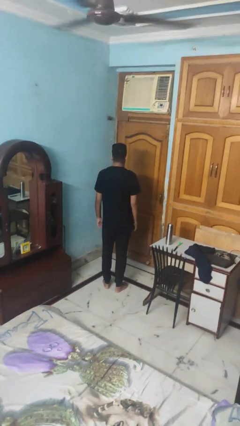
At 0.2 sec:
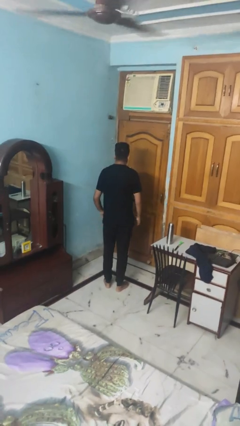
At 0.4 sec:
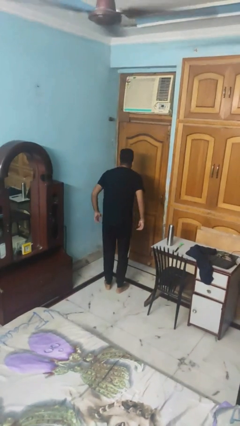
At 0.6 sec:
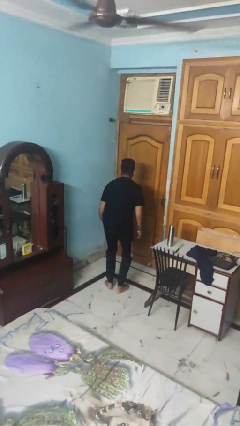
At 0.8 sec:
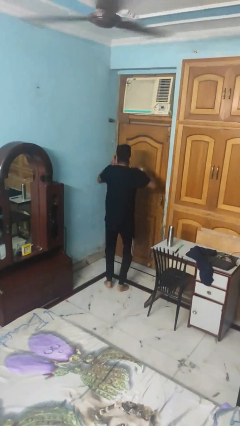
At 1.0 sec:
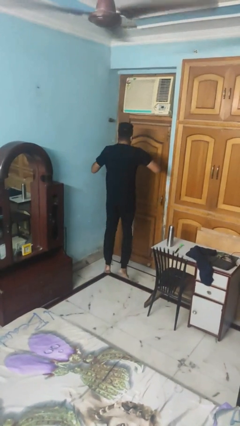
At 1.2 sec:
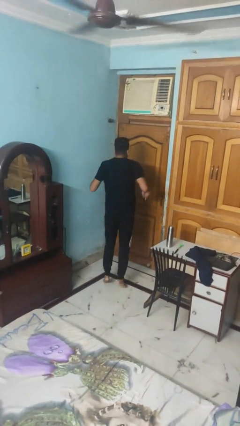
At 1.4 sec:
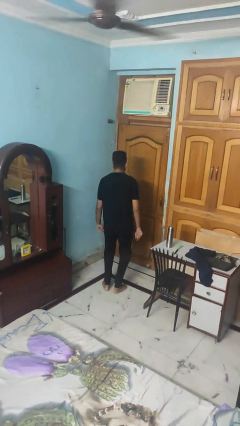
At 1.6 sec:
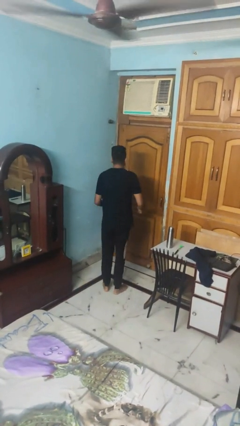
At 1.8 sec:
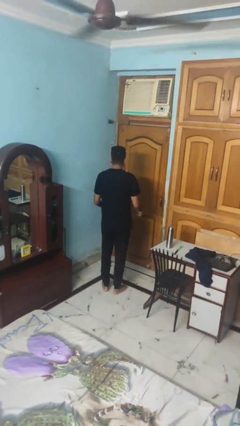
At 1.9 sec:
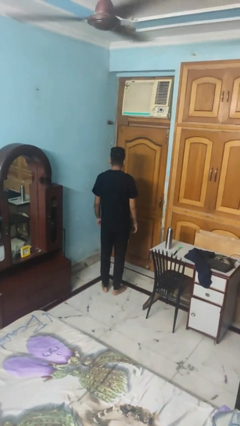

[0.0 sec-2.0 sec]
person jumps

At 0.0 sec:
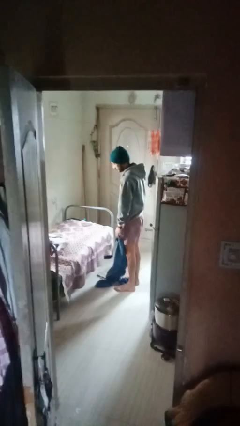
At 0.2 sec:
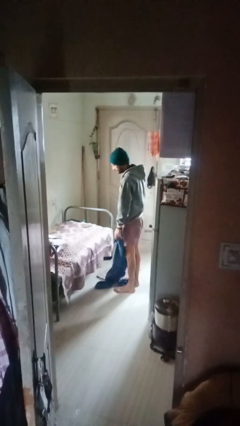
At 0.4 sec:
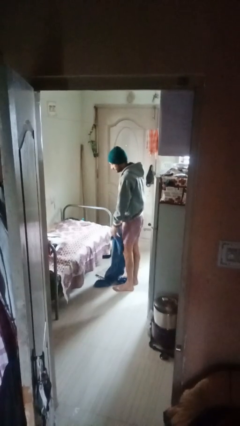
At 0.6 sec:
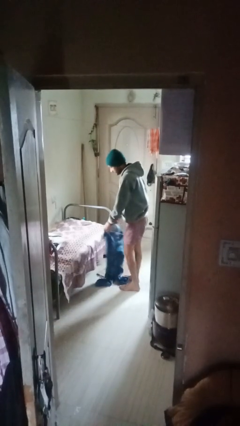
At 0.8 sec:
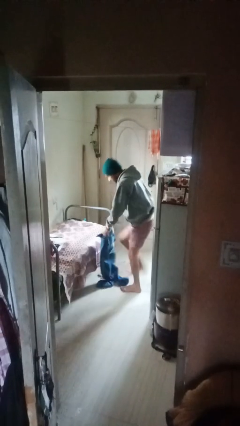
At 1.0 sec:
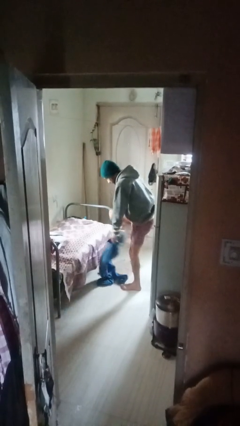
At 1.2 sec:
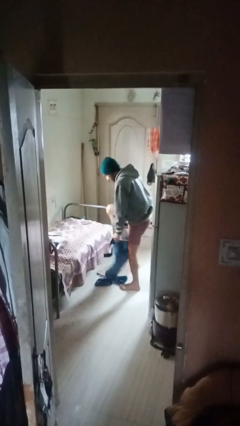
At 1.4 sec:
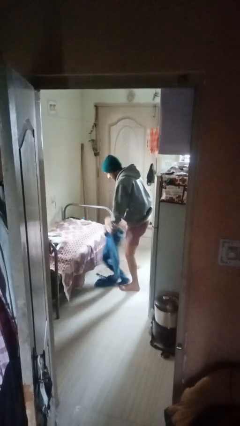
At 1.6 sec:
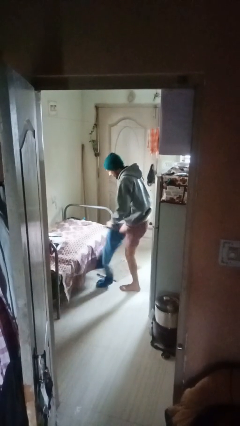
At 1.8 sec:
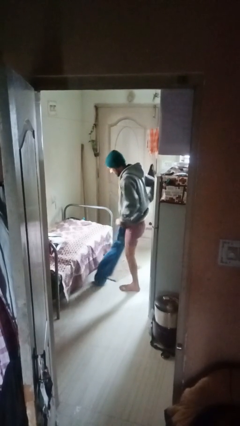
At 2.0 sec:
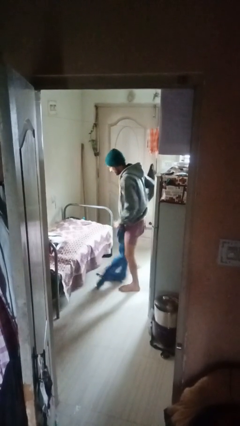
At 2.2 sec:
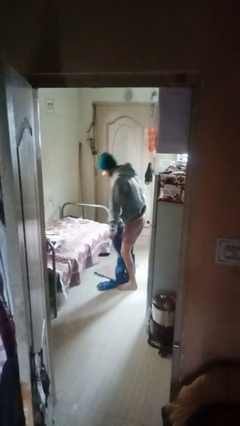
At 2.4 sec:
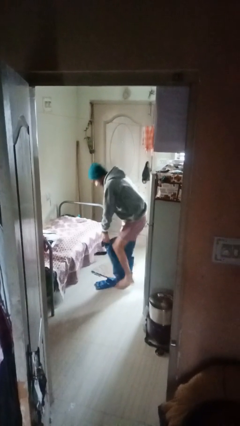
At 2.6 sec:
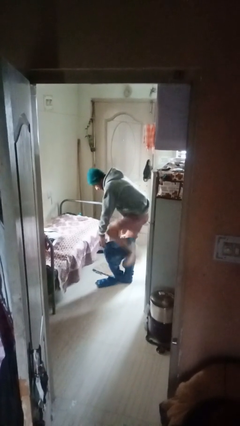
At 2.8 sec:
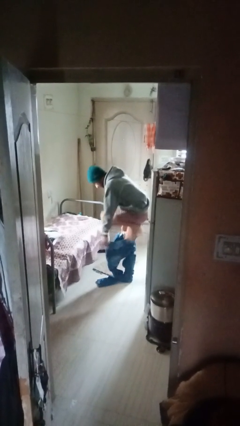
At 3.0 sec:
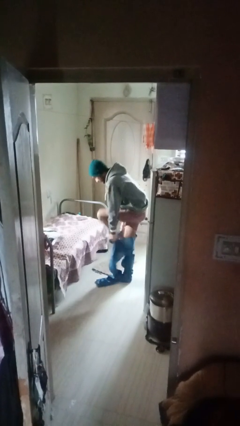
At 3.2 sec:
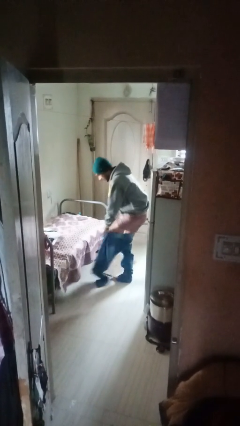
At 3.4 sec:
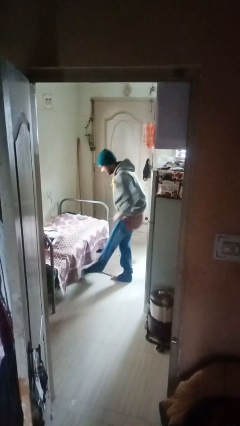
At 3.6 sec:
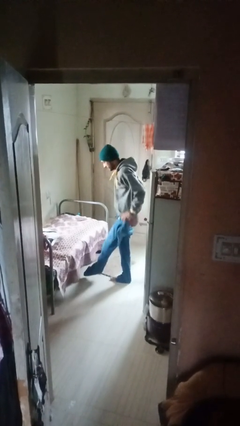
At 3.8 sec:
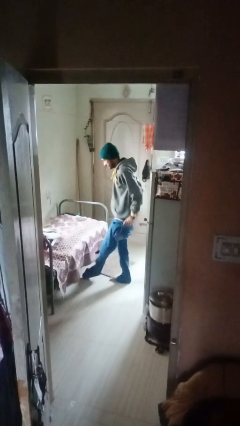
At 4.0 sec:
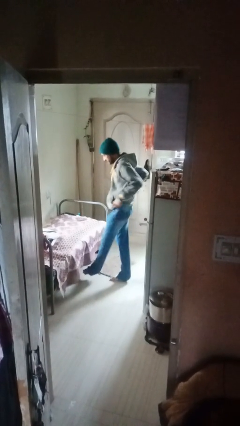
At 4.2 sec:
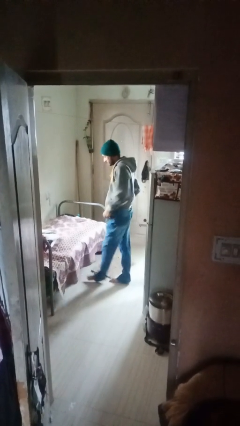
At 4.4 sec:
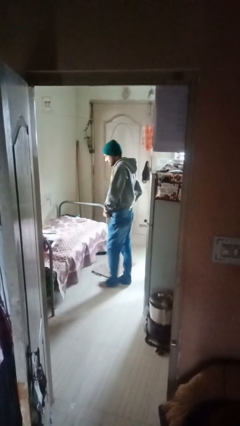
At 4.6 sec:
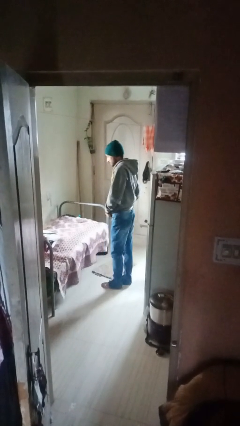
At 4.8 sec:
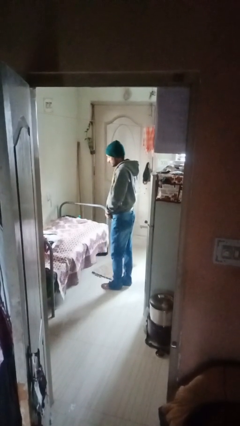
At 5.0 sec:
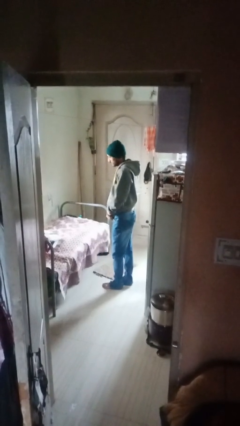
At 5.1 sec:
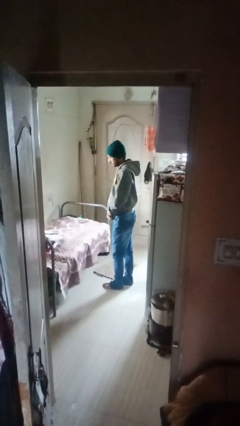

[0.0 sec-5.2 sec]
person puts on pants

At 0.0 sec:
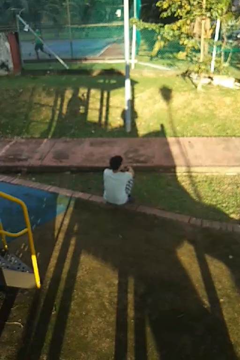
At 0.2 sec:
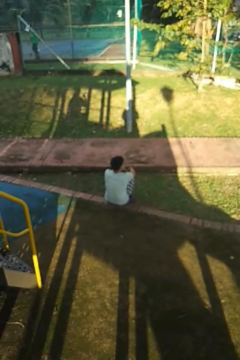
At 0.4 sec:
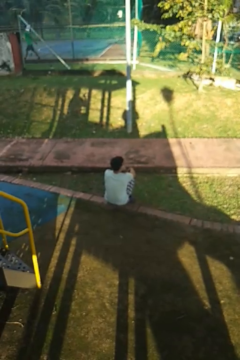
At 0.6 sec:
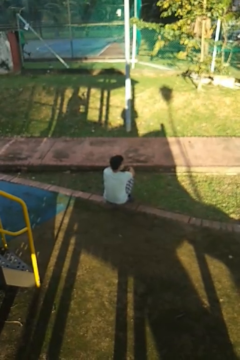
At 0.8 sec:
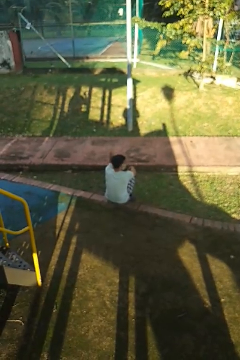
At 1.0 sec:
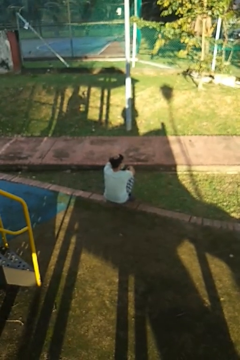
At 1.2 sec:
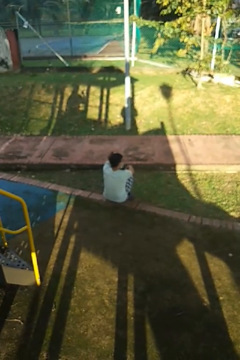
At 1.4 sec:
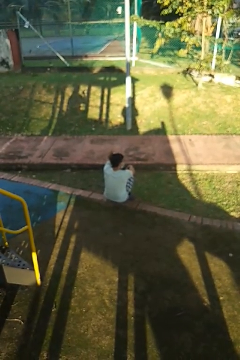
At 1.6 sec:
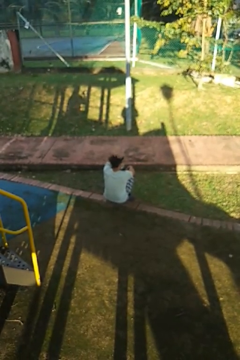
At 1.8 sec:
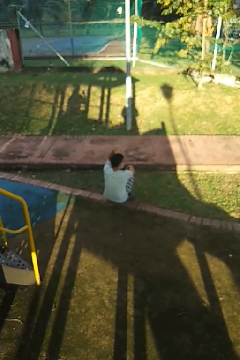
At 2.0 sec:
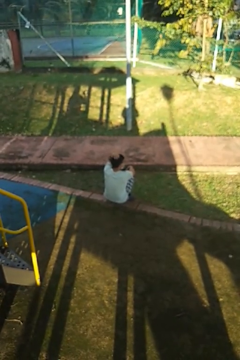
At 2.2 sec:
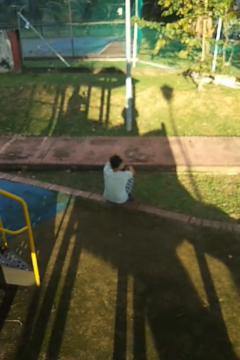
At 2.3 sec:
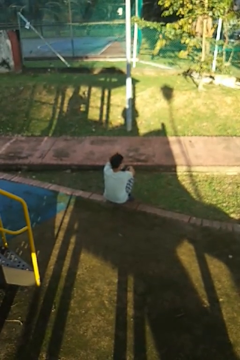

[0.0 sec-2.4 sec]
person pats head

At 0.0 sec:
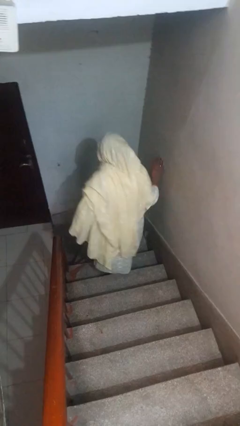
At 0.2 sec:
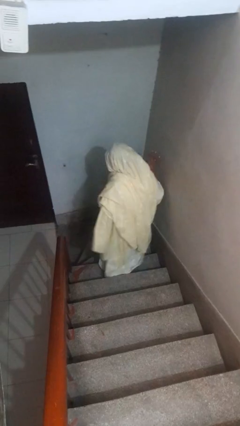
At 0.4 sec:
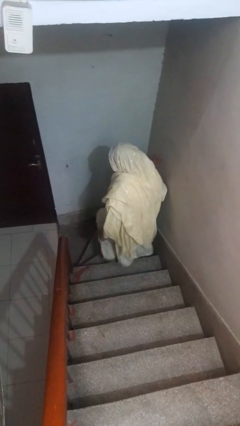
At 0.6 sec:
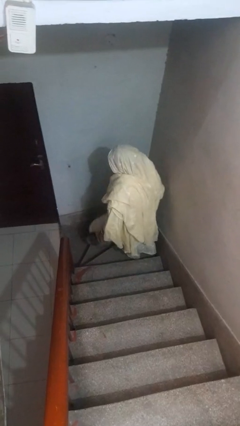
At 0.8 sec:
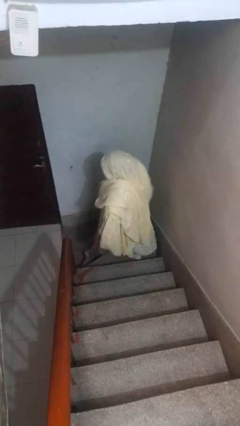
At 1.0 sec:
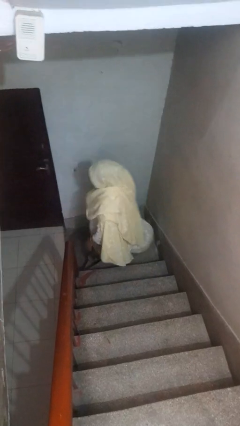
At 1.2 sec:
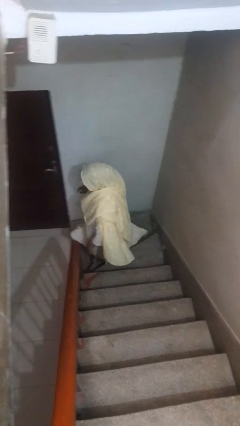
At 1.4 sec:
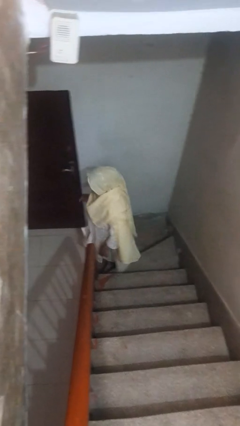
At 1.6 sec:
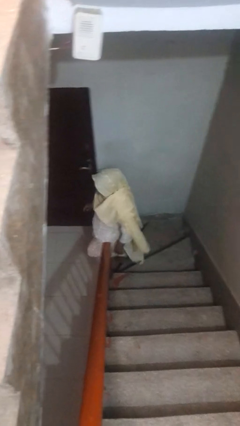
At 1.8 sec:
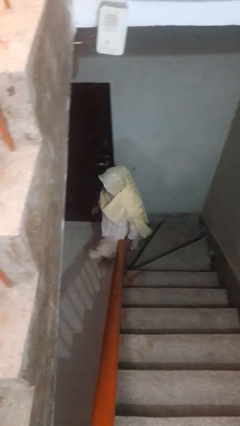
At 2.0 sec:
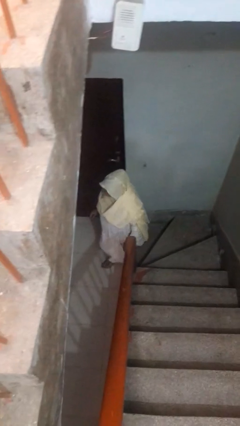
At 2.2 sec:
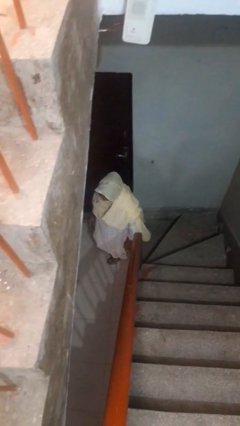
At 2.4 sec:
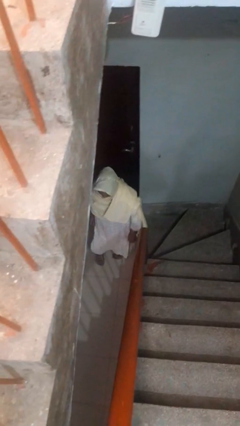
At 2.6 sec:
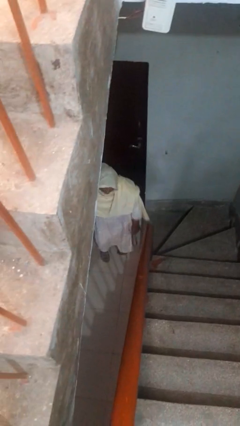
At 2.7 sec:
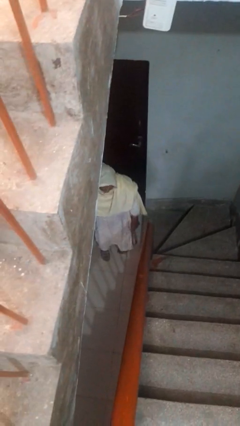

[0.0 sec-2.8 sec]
person climbs down stairs

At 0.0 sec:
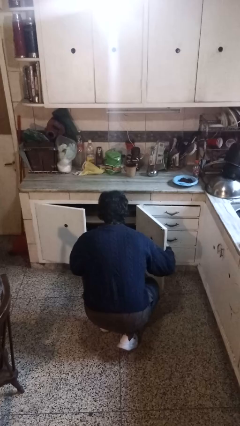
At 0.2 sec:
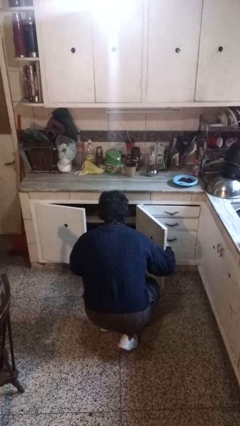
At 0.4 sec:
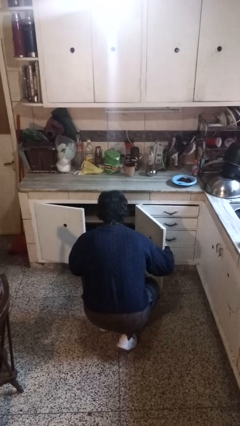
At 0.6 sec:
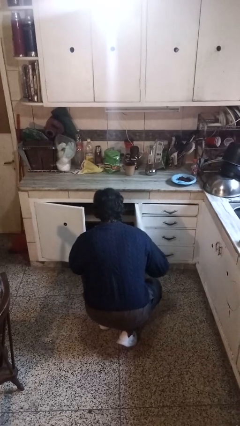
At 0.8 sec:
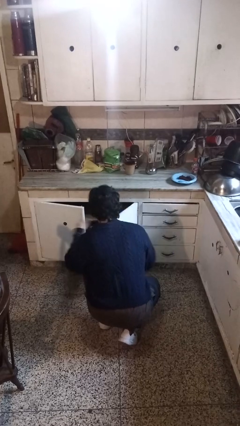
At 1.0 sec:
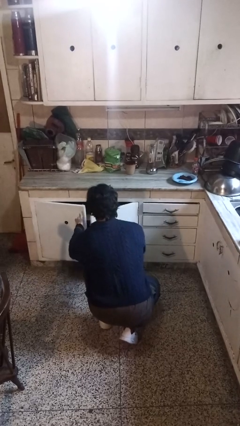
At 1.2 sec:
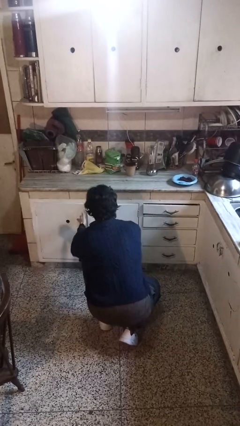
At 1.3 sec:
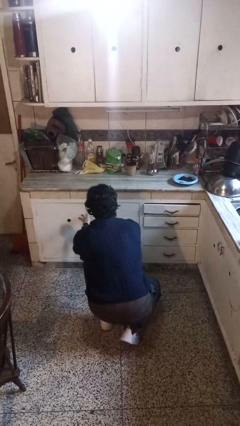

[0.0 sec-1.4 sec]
person closes cabinet

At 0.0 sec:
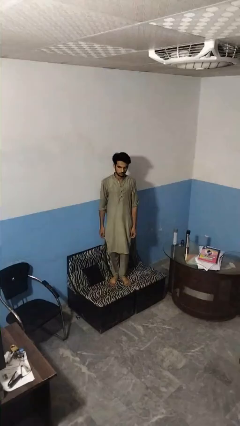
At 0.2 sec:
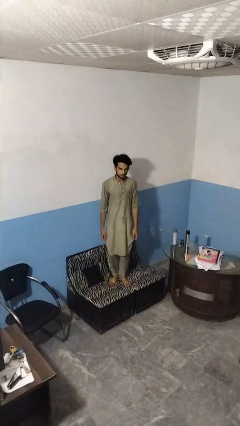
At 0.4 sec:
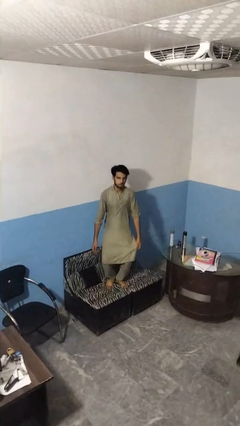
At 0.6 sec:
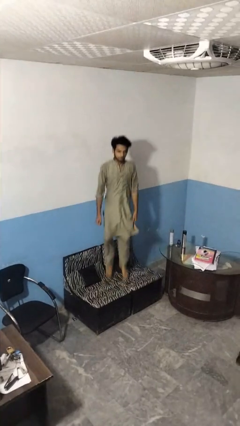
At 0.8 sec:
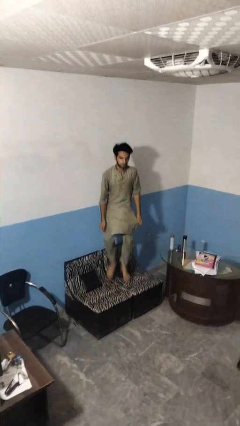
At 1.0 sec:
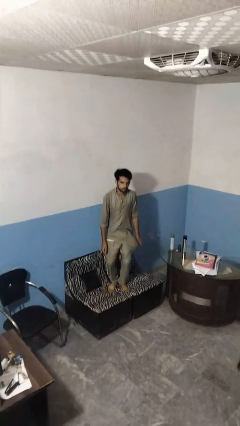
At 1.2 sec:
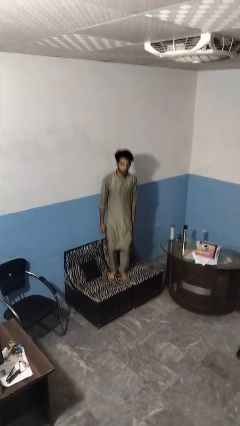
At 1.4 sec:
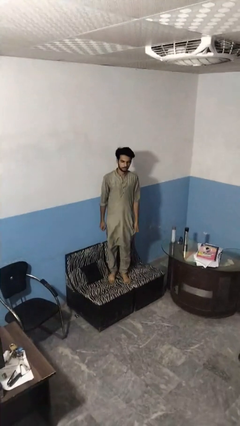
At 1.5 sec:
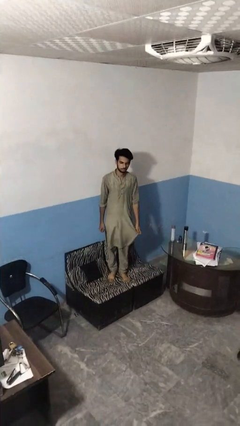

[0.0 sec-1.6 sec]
person jumps on couch

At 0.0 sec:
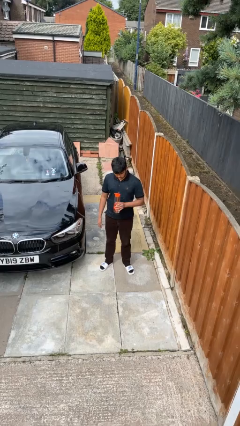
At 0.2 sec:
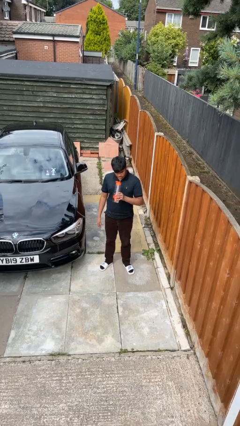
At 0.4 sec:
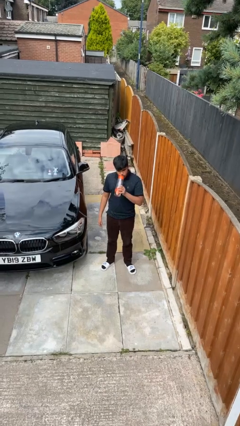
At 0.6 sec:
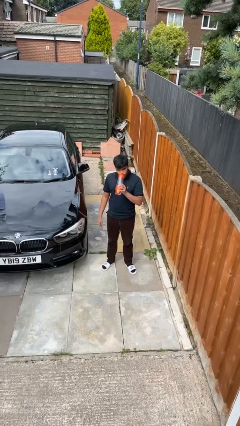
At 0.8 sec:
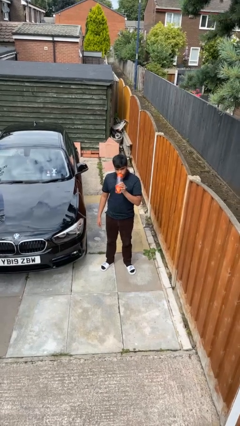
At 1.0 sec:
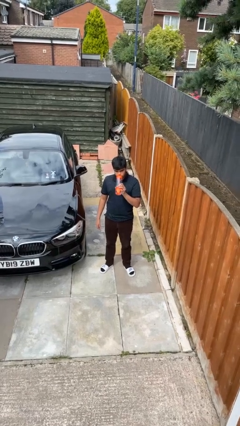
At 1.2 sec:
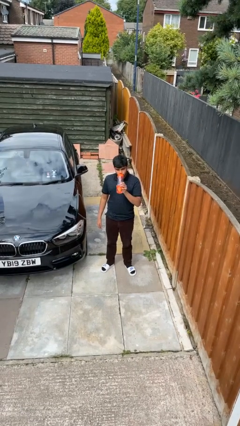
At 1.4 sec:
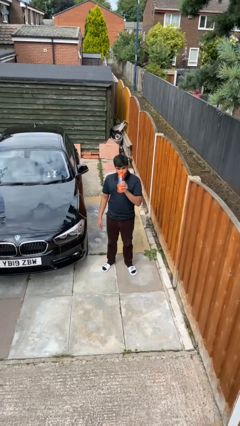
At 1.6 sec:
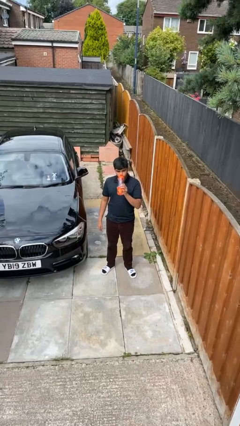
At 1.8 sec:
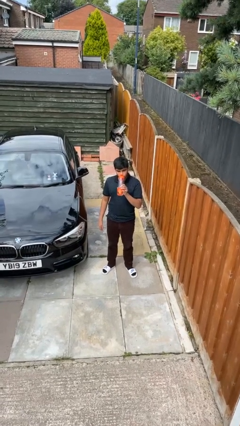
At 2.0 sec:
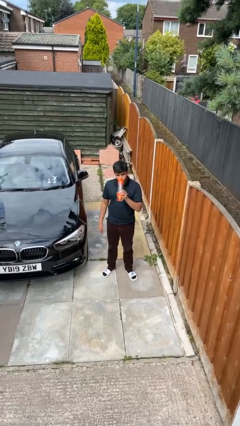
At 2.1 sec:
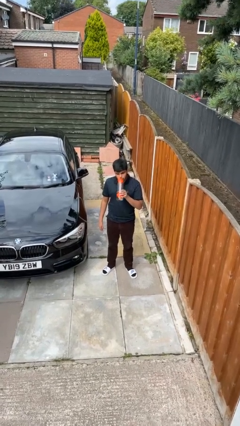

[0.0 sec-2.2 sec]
person drinks from bottle
